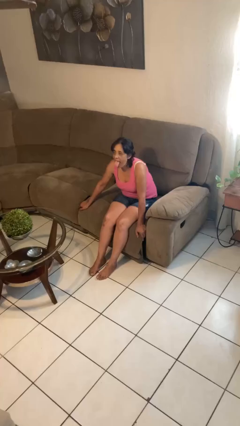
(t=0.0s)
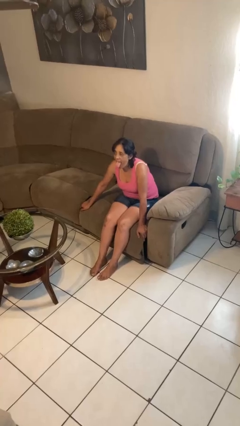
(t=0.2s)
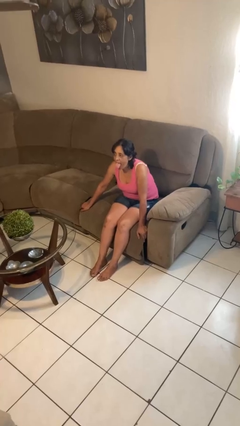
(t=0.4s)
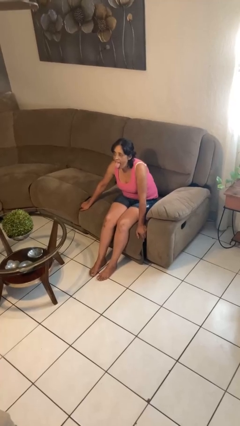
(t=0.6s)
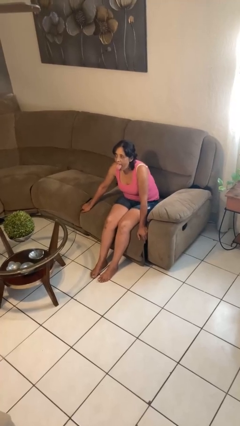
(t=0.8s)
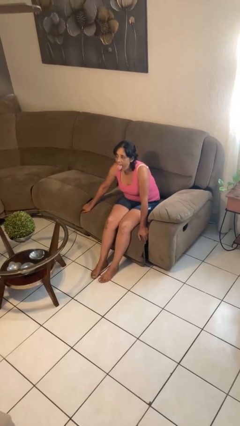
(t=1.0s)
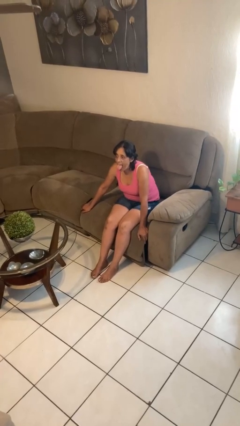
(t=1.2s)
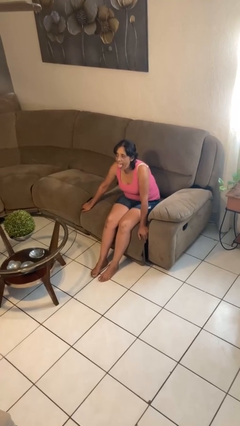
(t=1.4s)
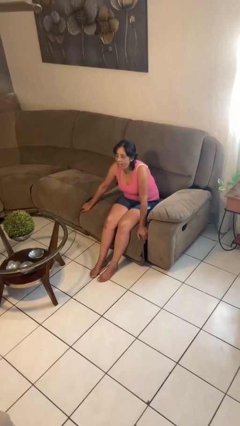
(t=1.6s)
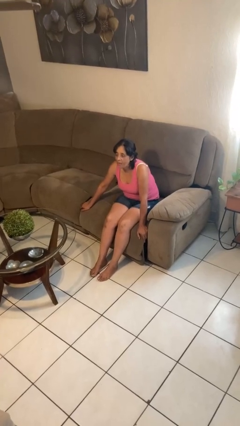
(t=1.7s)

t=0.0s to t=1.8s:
person sticks out tongue

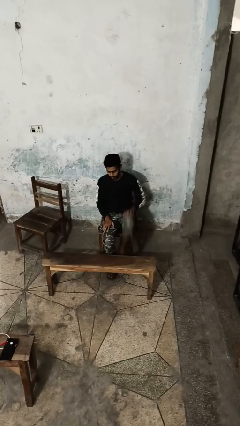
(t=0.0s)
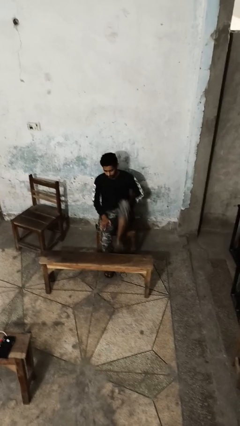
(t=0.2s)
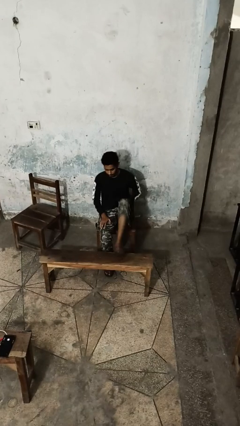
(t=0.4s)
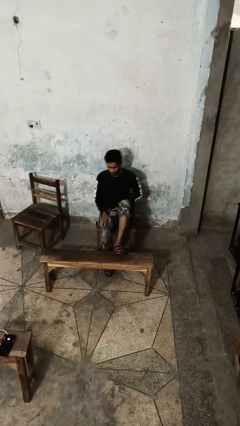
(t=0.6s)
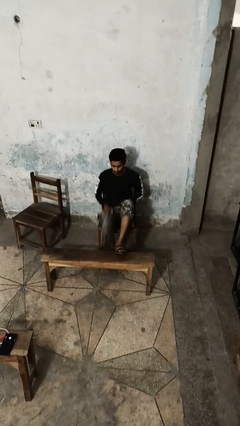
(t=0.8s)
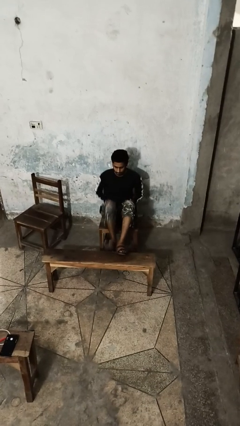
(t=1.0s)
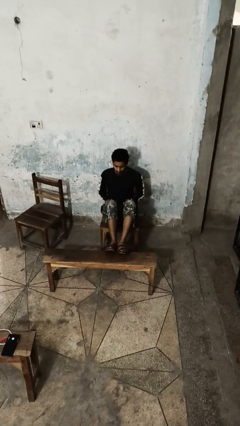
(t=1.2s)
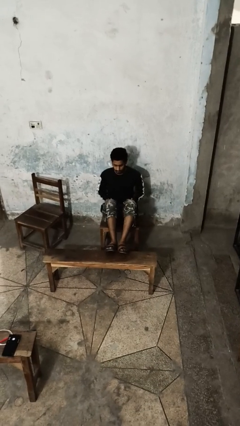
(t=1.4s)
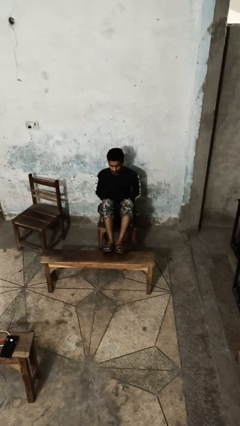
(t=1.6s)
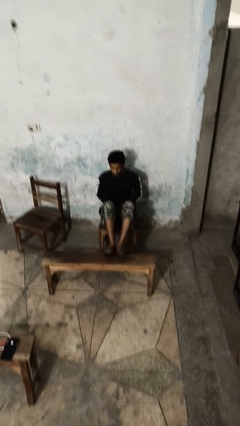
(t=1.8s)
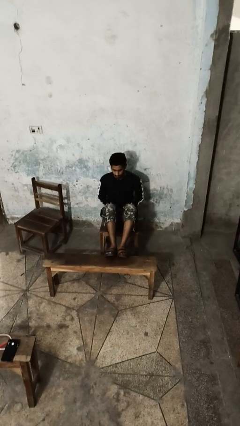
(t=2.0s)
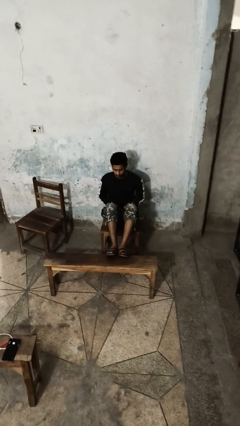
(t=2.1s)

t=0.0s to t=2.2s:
person puts feet up

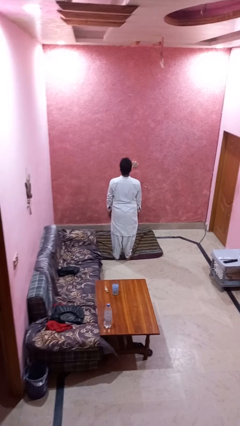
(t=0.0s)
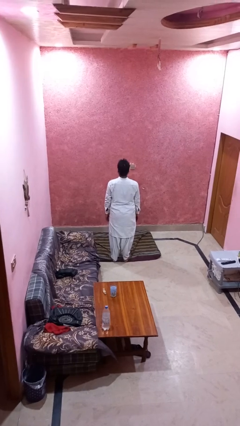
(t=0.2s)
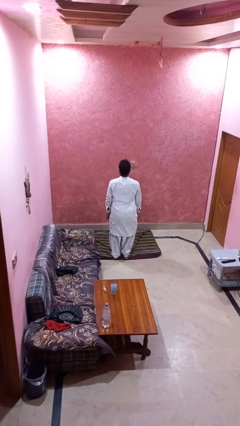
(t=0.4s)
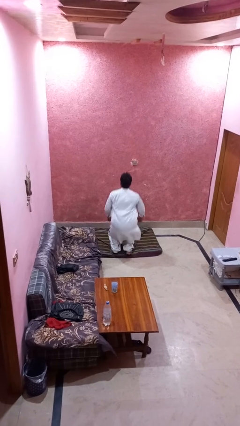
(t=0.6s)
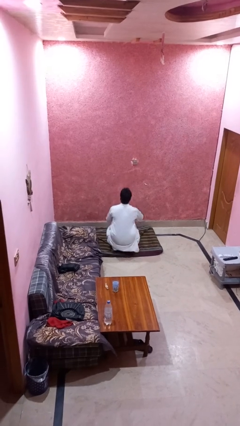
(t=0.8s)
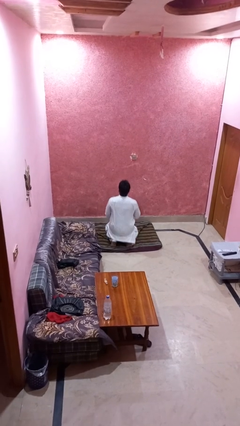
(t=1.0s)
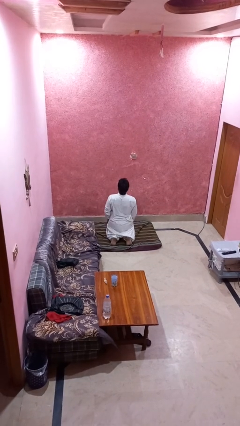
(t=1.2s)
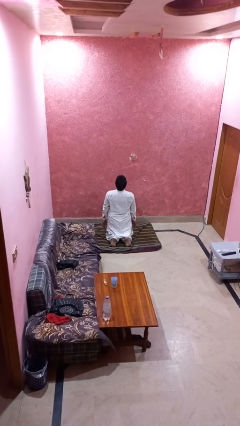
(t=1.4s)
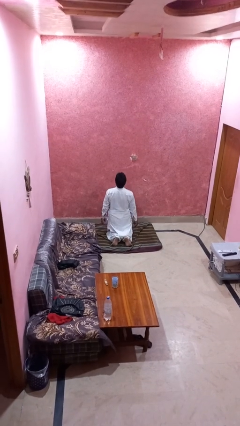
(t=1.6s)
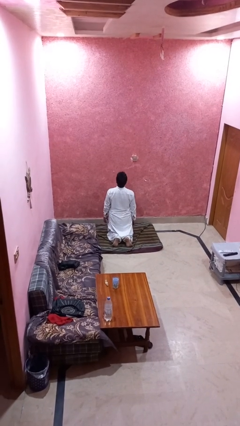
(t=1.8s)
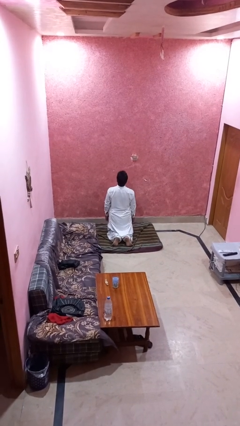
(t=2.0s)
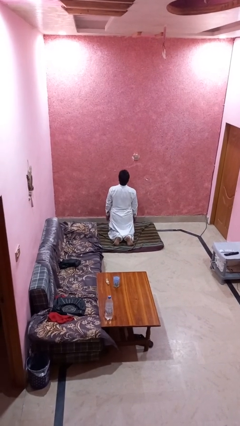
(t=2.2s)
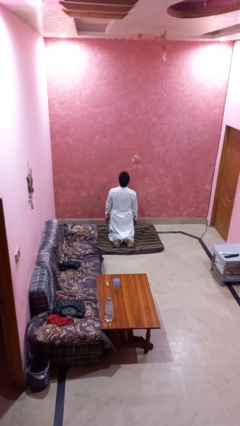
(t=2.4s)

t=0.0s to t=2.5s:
person kneels

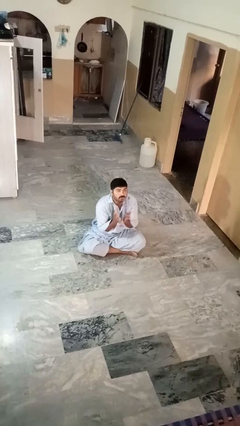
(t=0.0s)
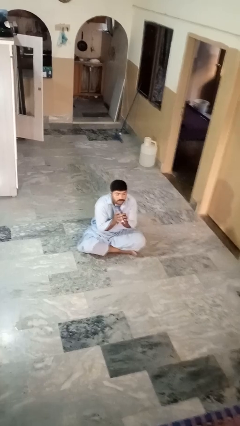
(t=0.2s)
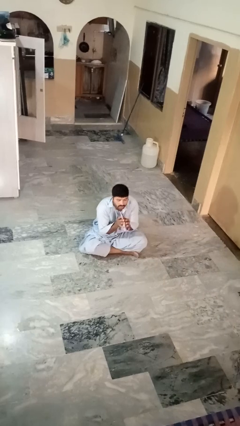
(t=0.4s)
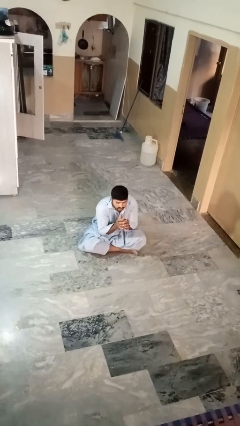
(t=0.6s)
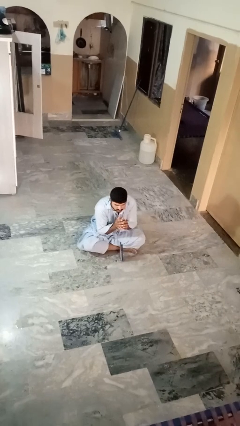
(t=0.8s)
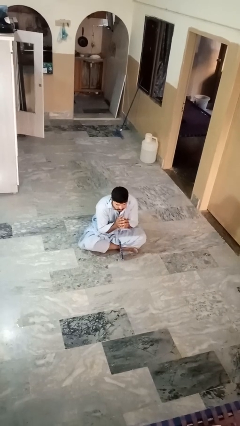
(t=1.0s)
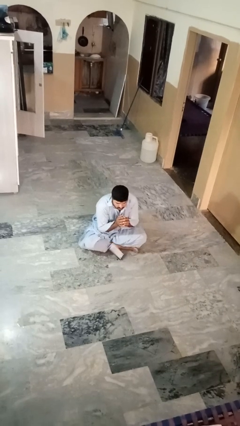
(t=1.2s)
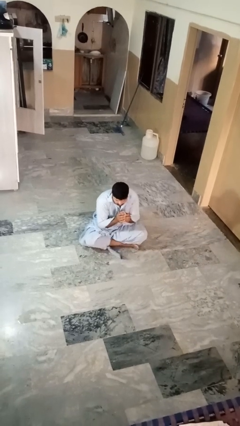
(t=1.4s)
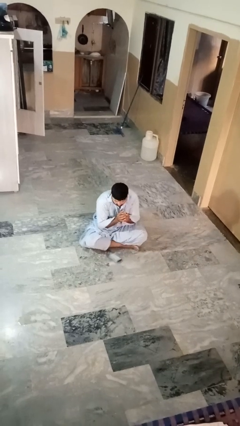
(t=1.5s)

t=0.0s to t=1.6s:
person catches dropped object

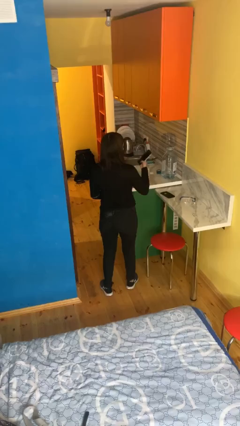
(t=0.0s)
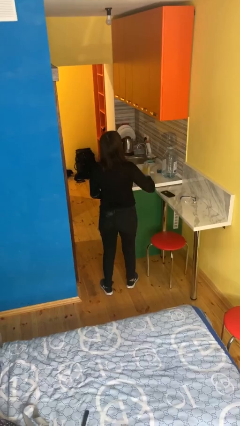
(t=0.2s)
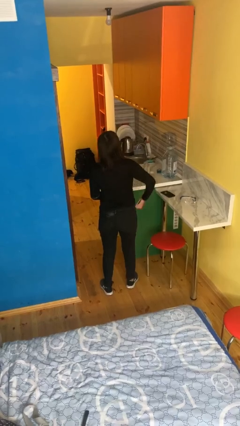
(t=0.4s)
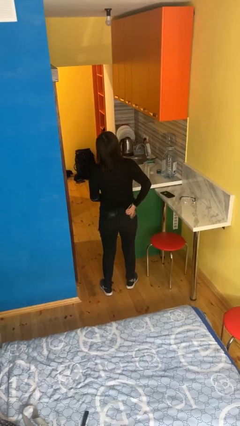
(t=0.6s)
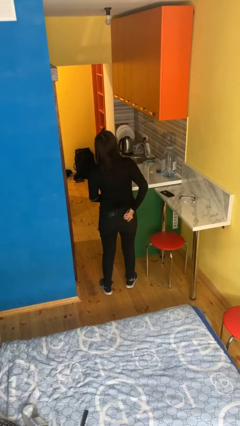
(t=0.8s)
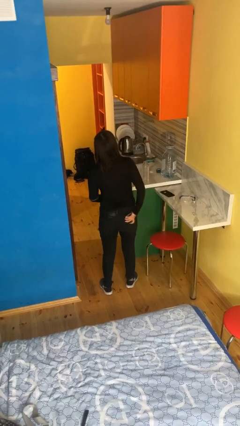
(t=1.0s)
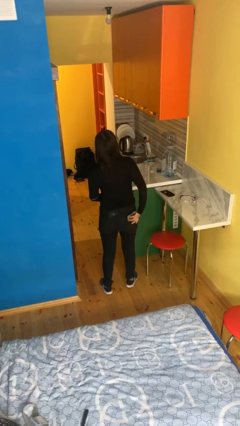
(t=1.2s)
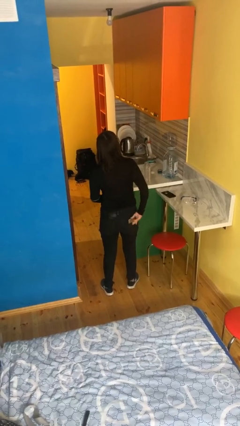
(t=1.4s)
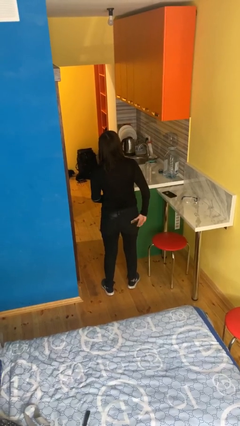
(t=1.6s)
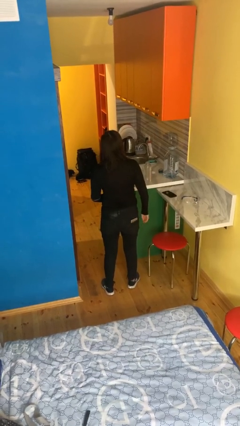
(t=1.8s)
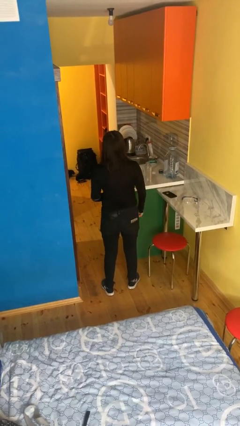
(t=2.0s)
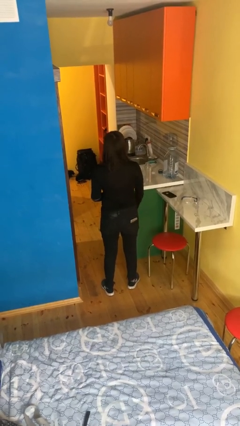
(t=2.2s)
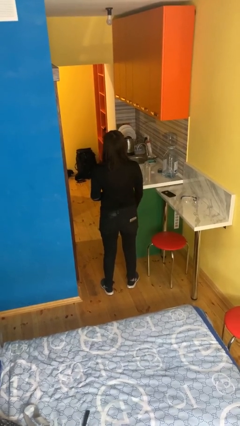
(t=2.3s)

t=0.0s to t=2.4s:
person puts phone into pocket

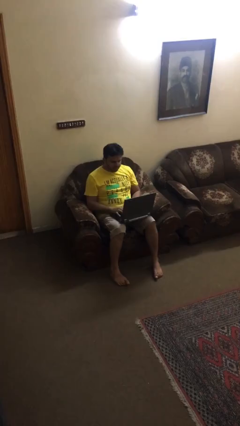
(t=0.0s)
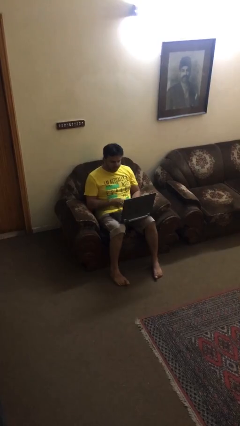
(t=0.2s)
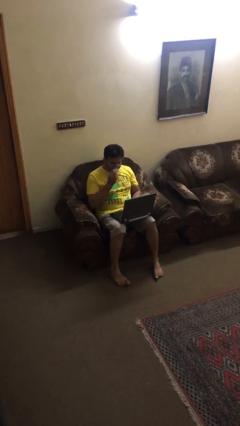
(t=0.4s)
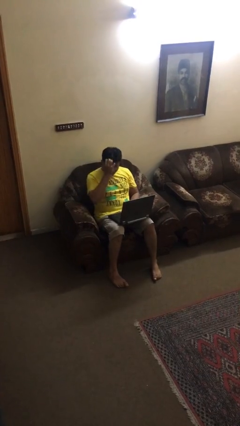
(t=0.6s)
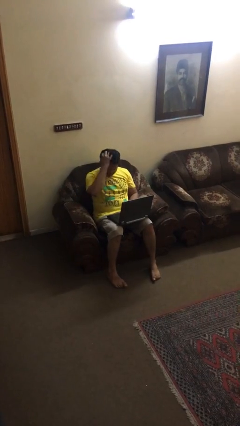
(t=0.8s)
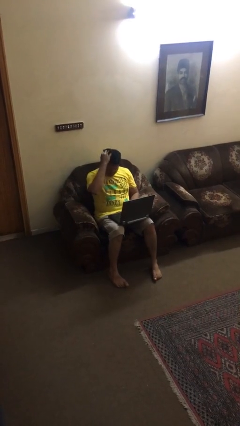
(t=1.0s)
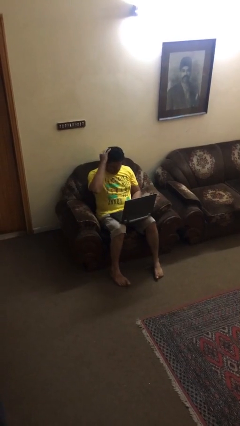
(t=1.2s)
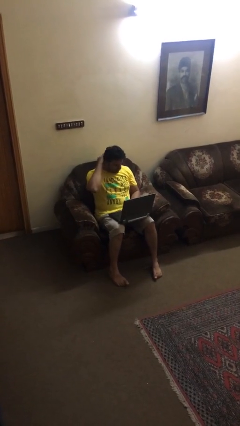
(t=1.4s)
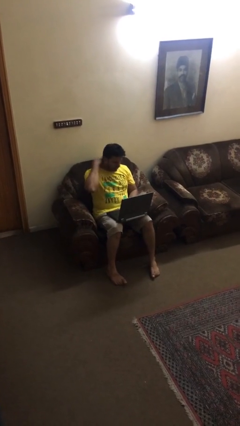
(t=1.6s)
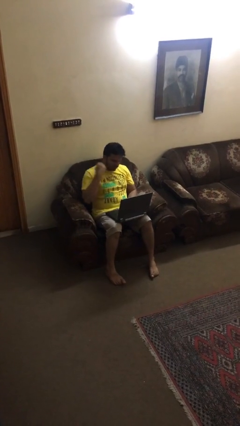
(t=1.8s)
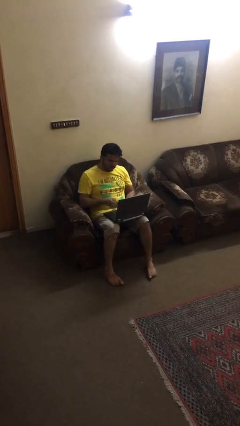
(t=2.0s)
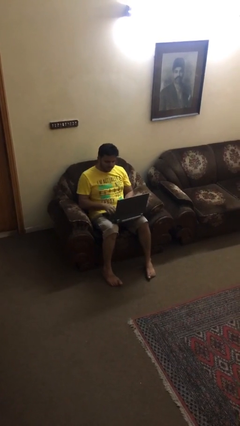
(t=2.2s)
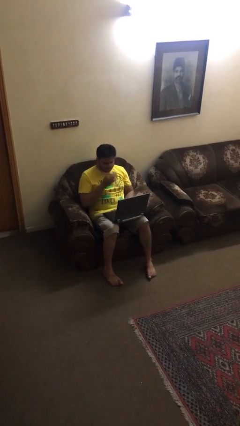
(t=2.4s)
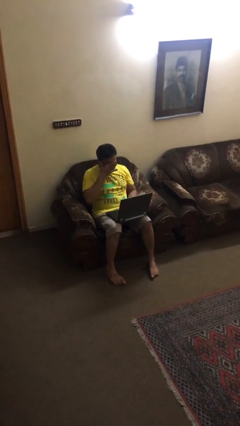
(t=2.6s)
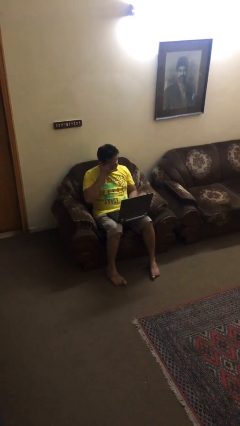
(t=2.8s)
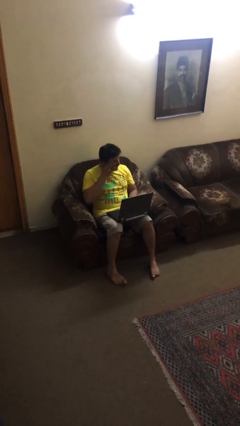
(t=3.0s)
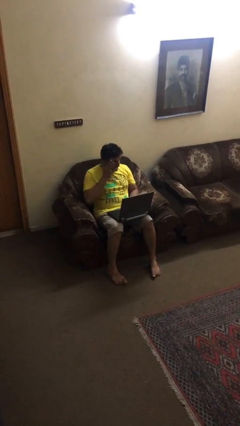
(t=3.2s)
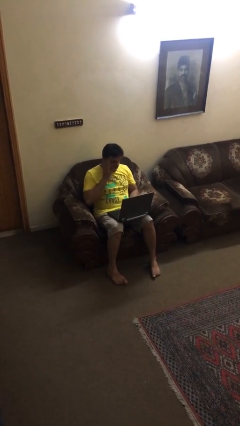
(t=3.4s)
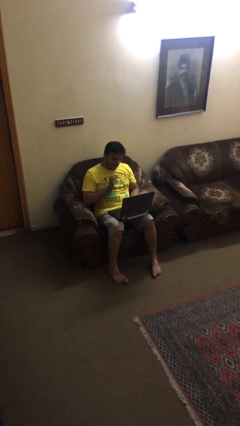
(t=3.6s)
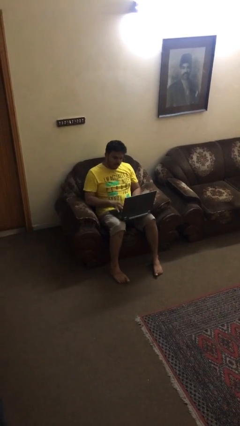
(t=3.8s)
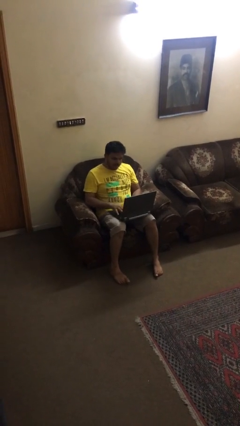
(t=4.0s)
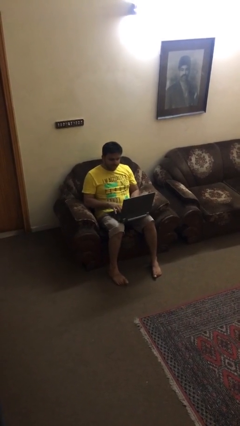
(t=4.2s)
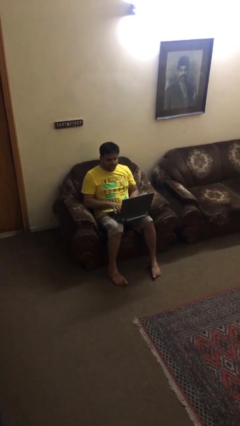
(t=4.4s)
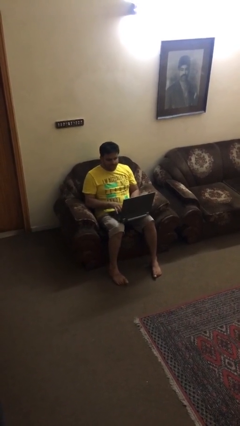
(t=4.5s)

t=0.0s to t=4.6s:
person interacts with laptop

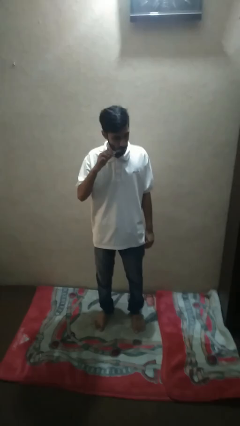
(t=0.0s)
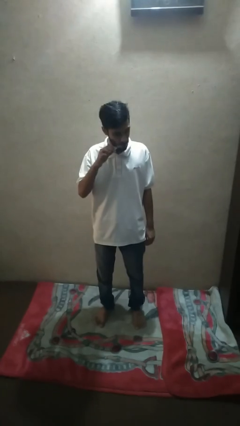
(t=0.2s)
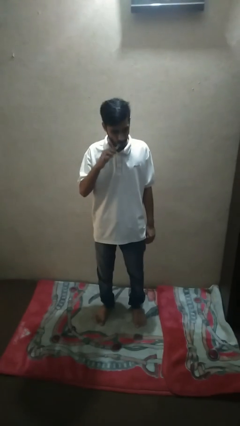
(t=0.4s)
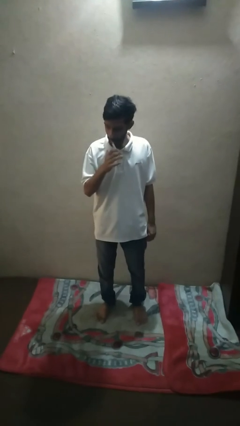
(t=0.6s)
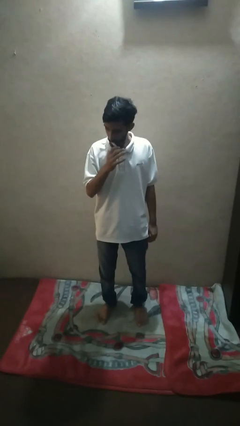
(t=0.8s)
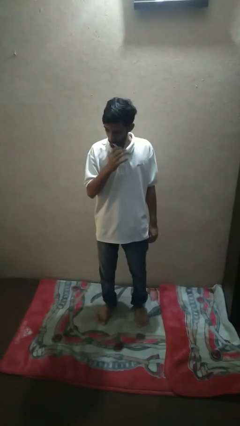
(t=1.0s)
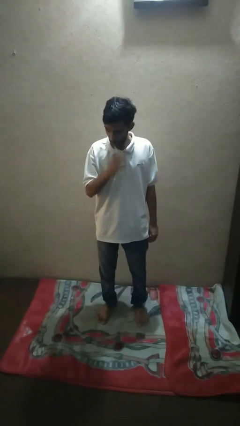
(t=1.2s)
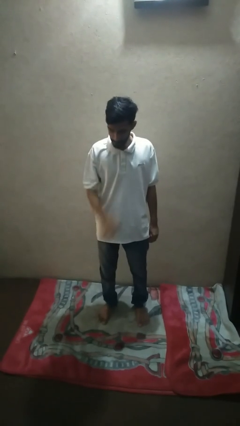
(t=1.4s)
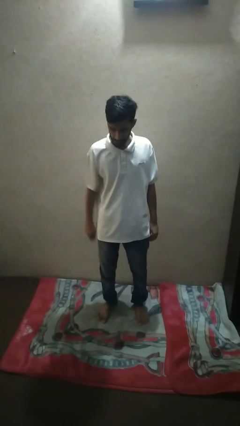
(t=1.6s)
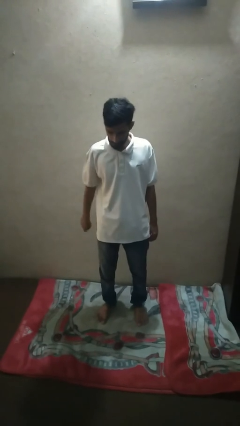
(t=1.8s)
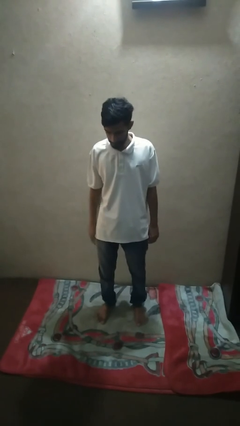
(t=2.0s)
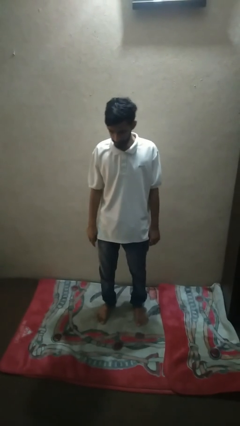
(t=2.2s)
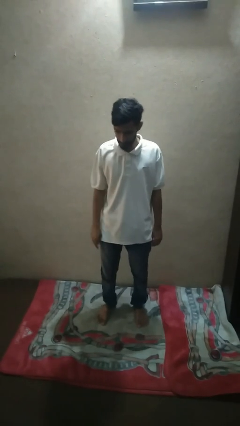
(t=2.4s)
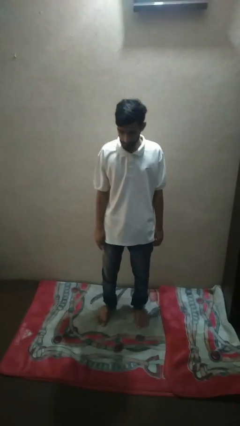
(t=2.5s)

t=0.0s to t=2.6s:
person brushes teeth
